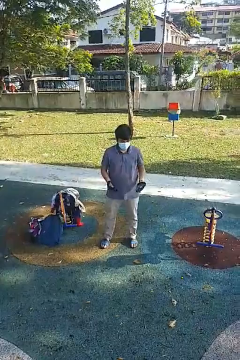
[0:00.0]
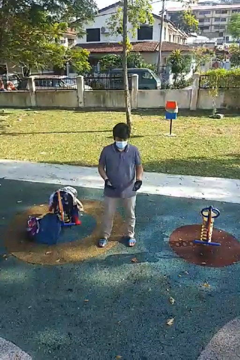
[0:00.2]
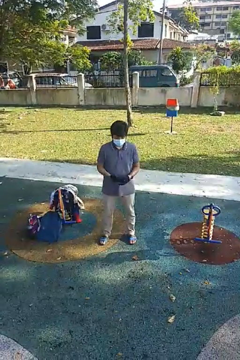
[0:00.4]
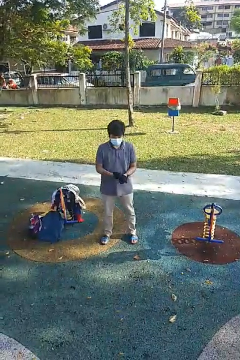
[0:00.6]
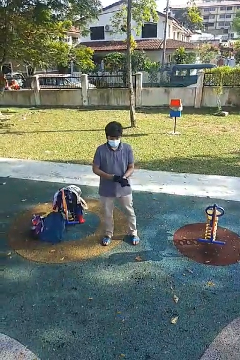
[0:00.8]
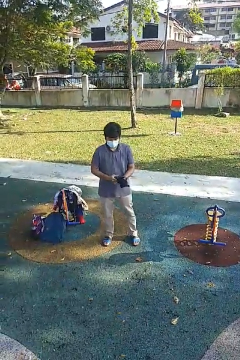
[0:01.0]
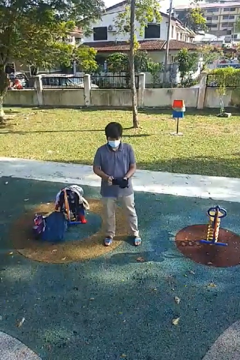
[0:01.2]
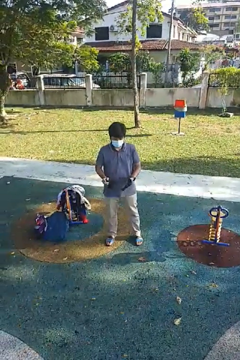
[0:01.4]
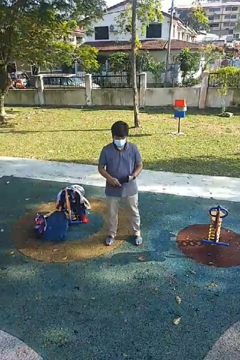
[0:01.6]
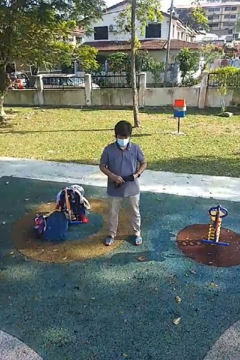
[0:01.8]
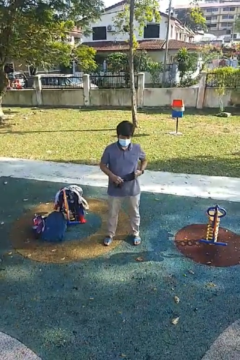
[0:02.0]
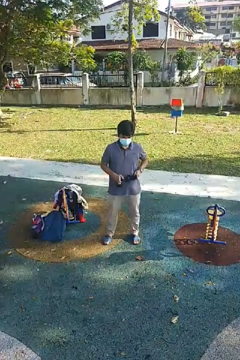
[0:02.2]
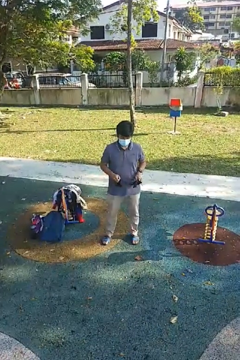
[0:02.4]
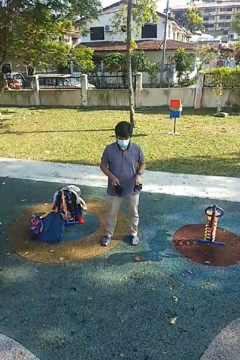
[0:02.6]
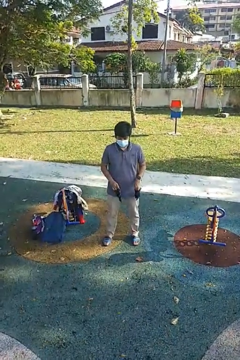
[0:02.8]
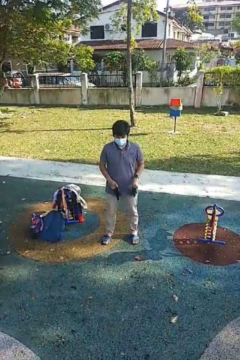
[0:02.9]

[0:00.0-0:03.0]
person takes off gloves

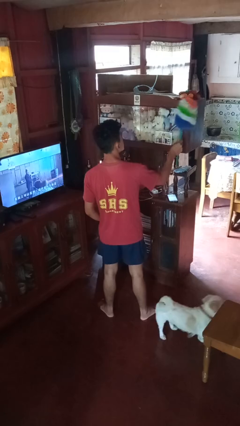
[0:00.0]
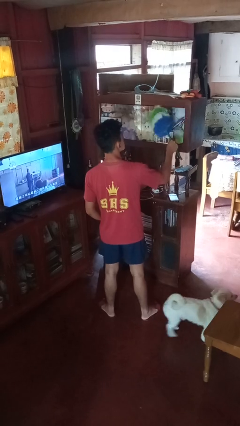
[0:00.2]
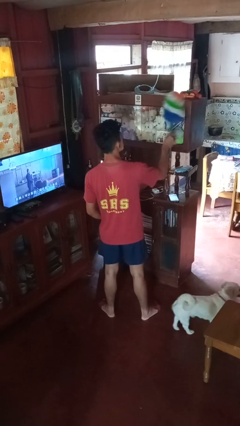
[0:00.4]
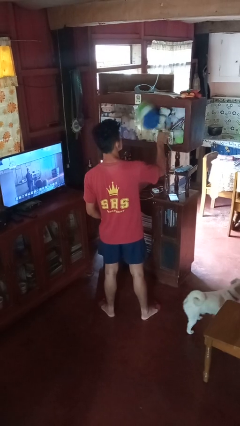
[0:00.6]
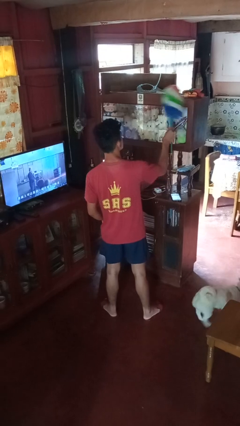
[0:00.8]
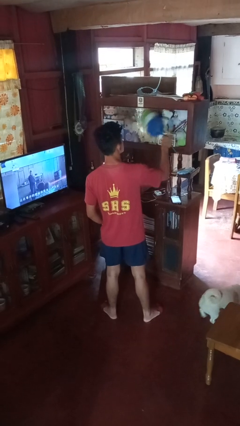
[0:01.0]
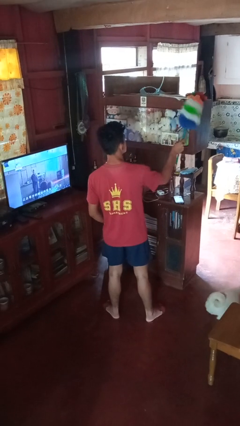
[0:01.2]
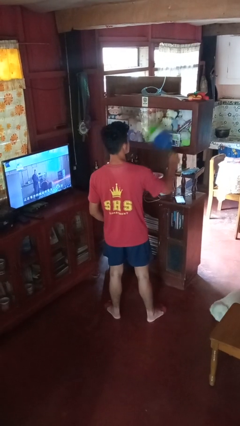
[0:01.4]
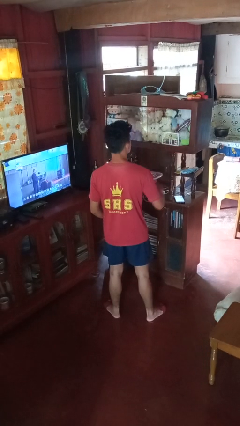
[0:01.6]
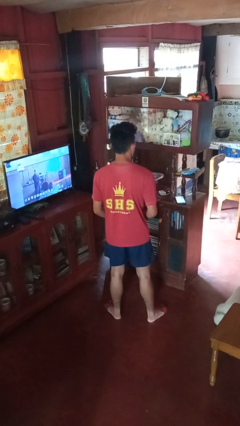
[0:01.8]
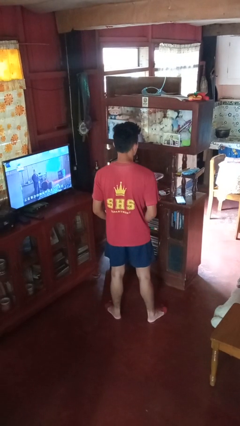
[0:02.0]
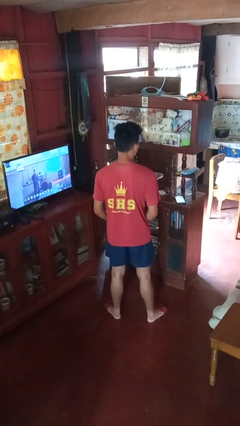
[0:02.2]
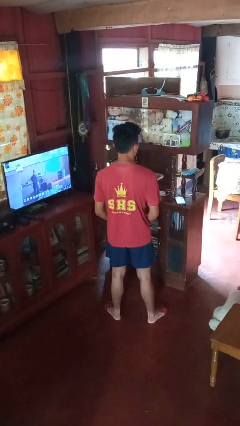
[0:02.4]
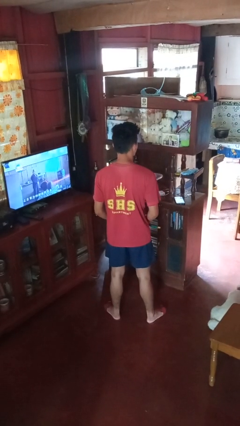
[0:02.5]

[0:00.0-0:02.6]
person dusts furniture

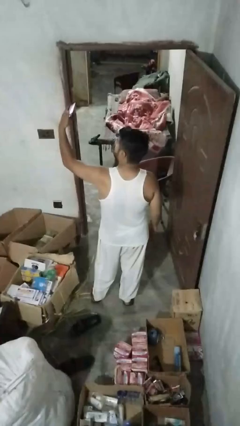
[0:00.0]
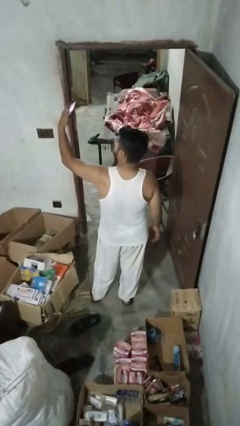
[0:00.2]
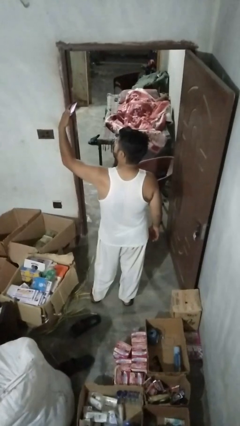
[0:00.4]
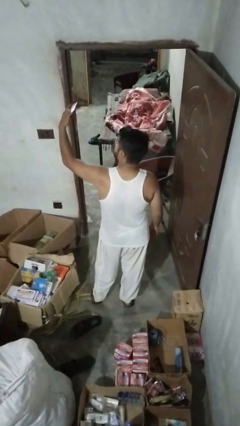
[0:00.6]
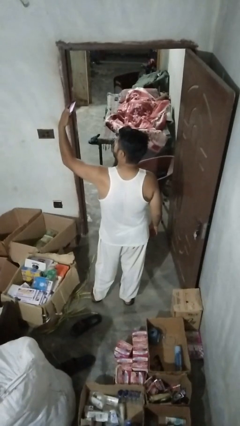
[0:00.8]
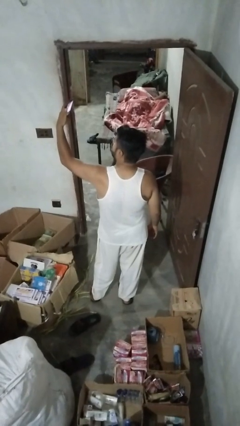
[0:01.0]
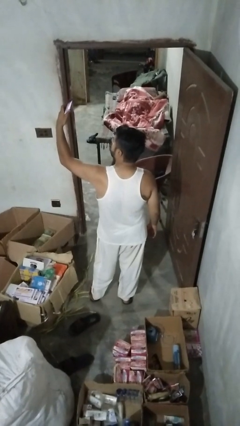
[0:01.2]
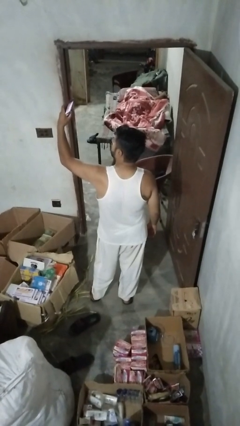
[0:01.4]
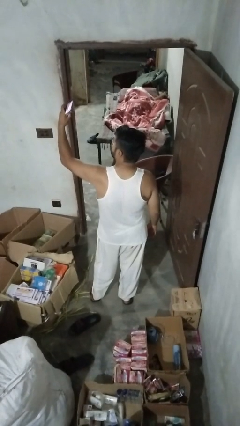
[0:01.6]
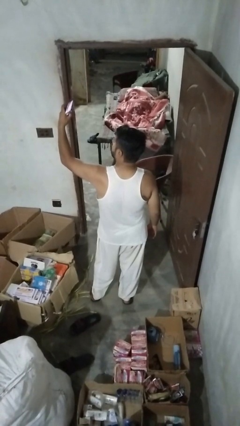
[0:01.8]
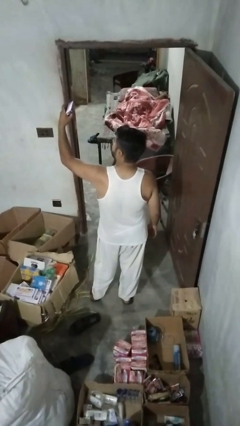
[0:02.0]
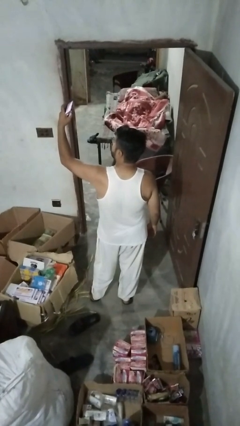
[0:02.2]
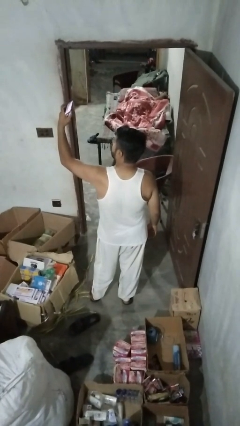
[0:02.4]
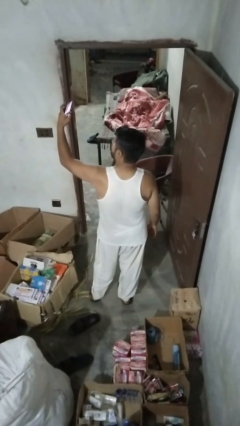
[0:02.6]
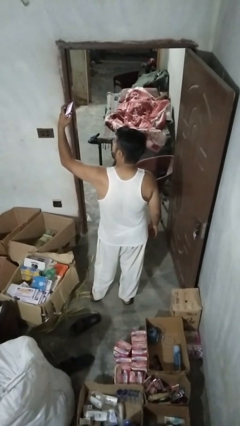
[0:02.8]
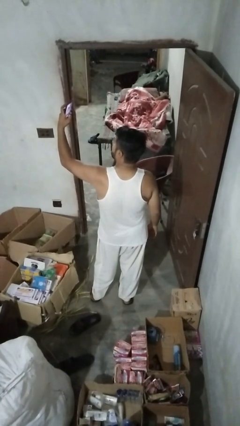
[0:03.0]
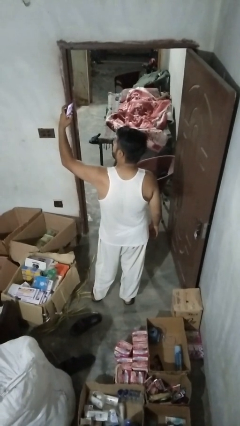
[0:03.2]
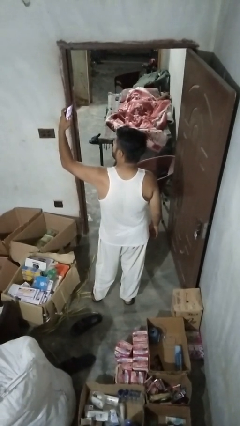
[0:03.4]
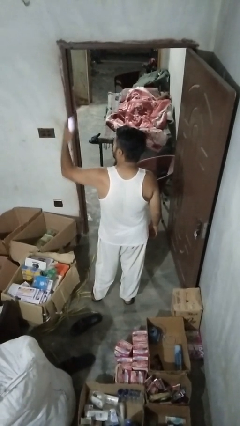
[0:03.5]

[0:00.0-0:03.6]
person takes selfie

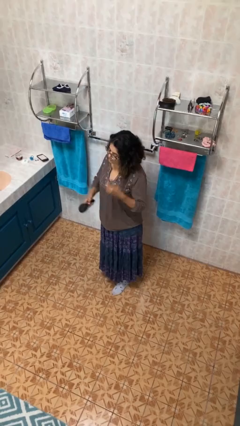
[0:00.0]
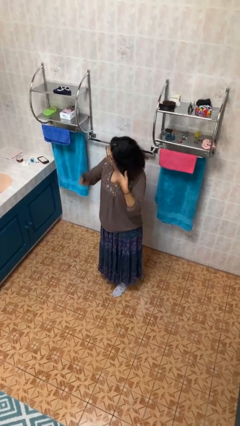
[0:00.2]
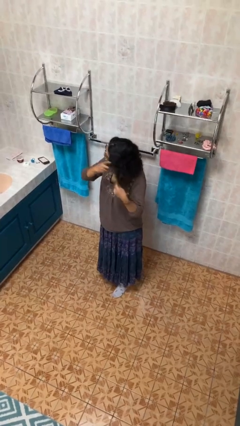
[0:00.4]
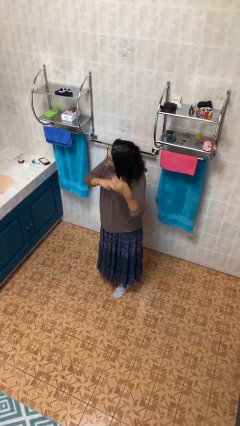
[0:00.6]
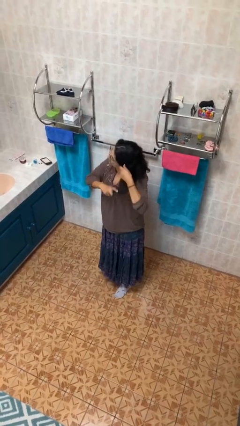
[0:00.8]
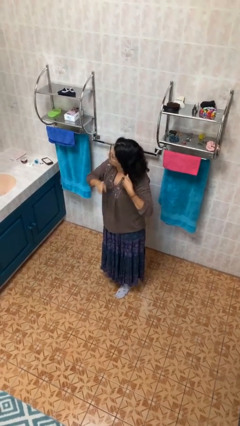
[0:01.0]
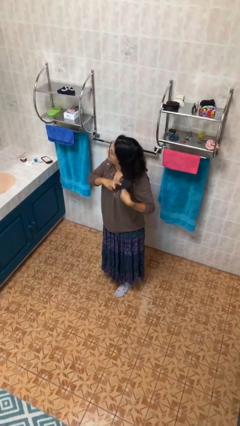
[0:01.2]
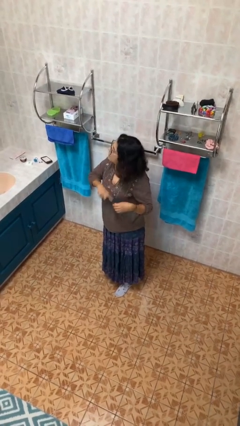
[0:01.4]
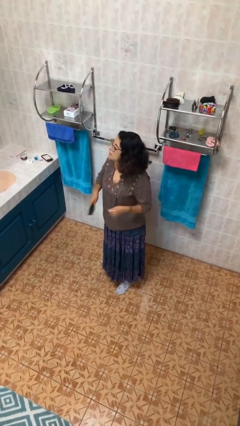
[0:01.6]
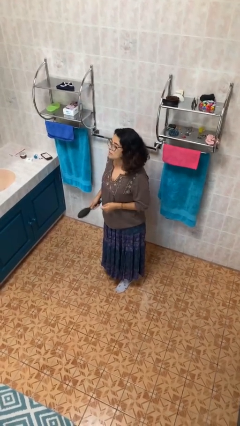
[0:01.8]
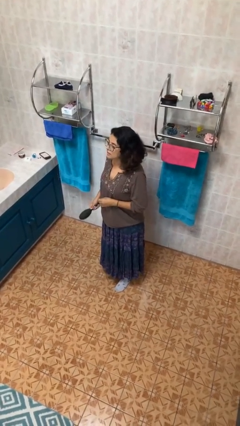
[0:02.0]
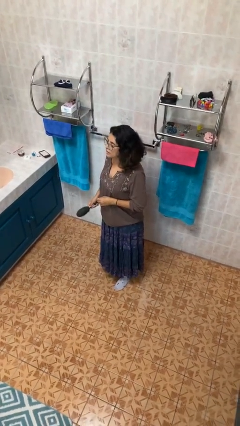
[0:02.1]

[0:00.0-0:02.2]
person brushes hair

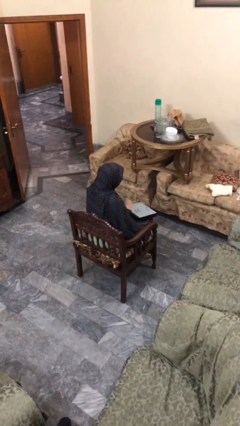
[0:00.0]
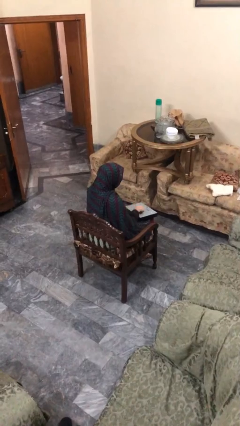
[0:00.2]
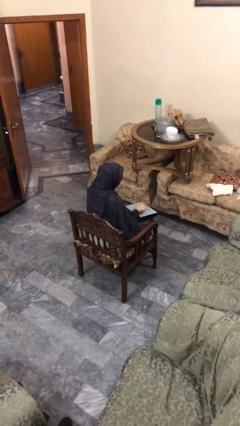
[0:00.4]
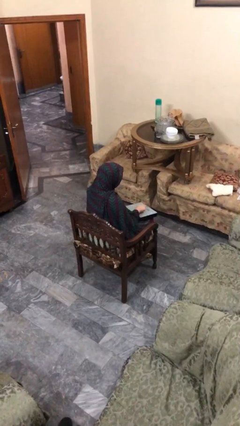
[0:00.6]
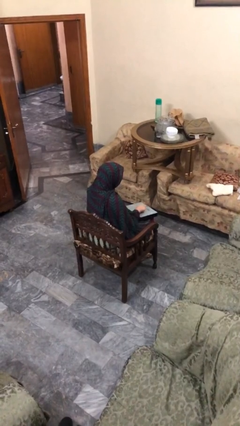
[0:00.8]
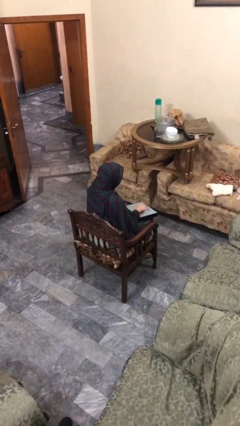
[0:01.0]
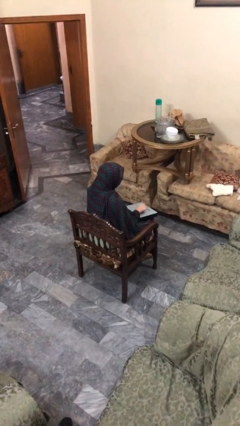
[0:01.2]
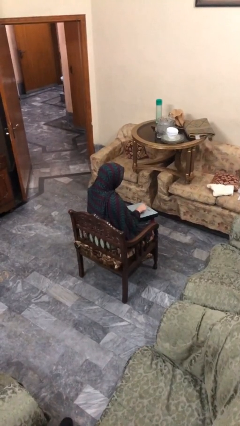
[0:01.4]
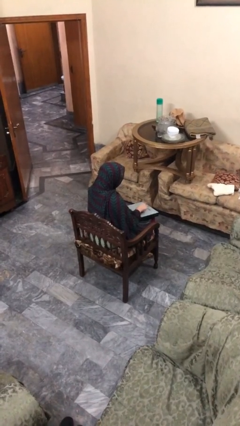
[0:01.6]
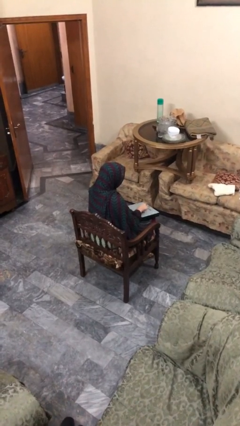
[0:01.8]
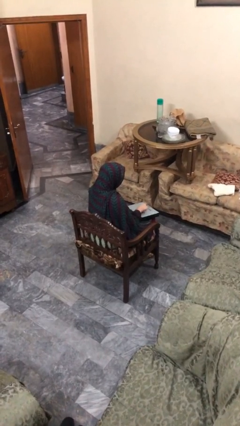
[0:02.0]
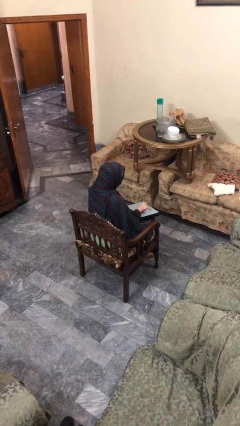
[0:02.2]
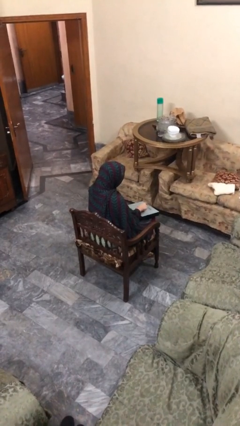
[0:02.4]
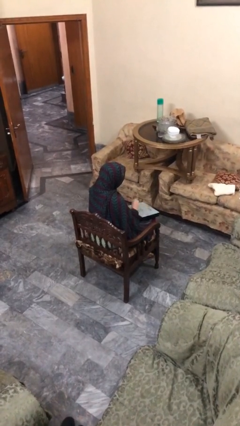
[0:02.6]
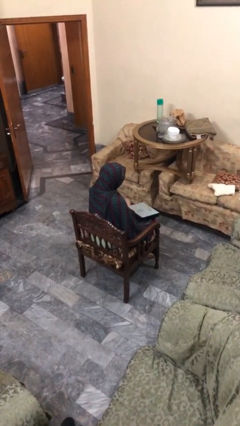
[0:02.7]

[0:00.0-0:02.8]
person taps object with finger

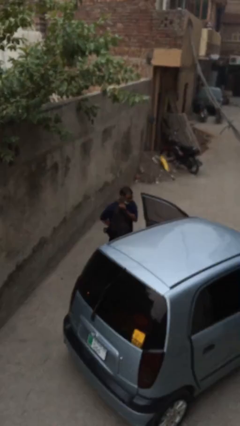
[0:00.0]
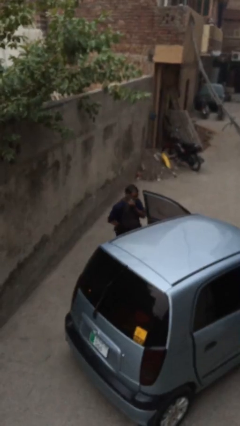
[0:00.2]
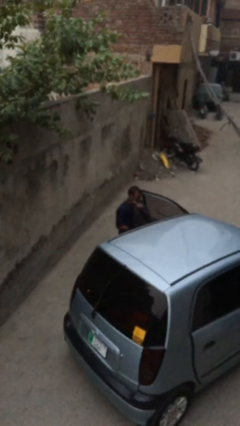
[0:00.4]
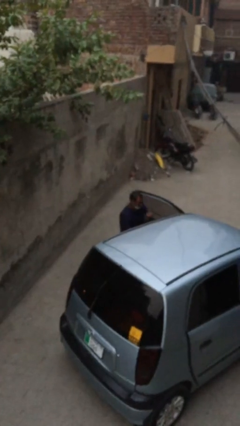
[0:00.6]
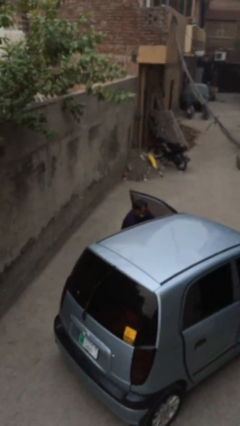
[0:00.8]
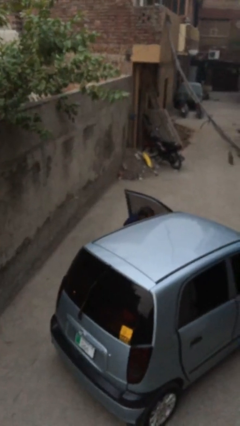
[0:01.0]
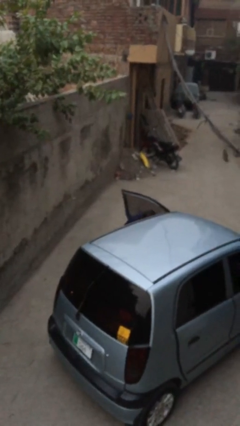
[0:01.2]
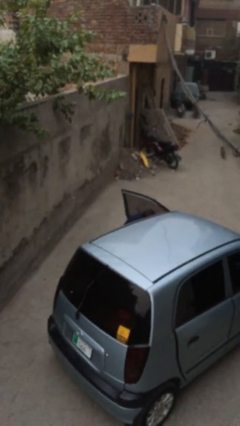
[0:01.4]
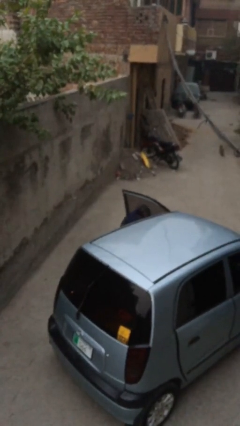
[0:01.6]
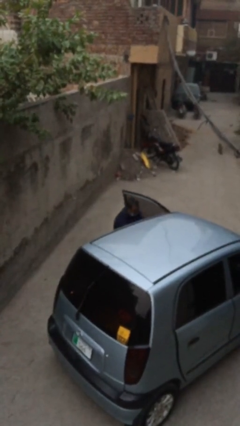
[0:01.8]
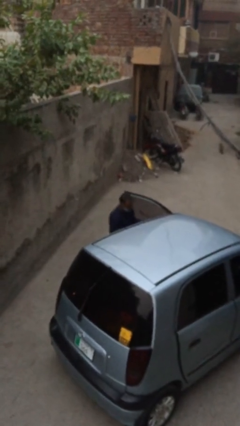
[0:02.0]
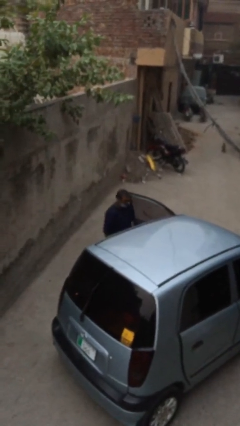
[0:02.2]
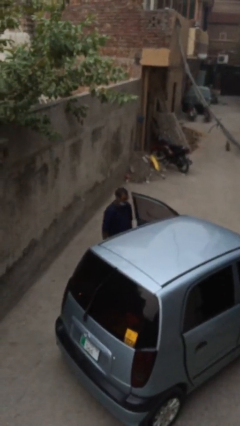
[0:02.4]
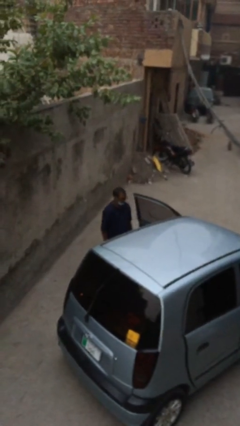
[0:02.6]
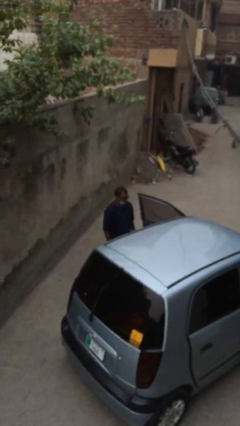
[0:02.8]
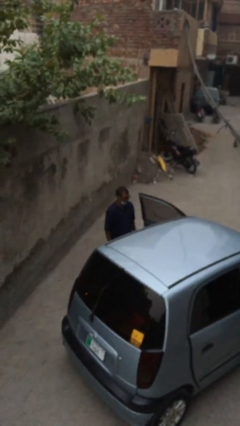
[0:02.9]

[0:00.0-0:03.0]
person loads car

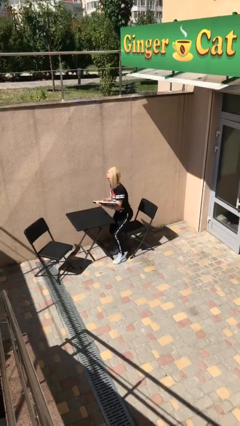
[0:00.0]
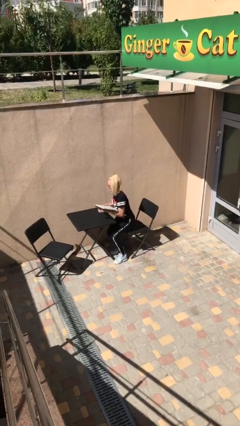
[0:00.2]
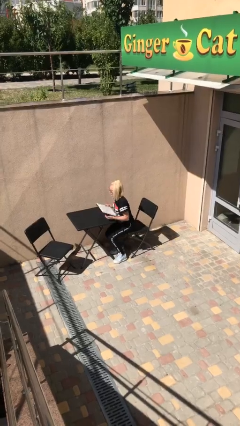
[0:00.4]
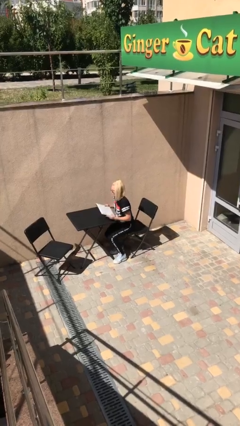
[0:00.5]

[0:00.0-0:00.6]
person sits down
